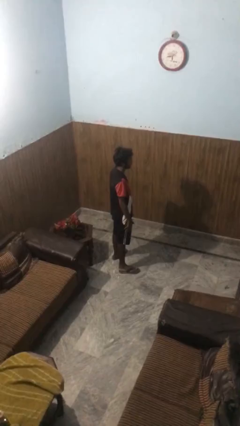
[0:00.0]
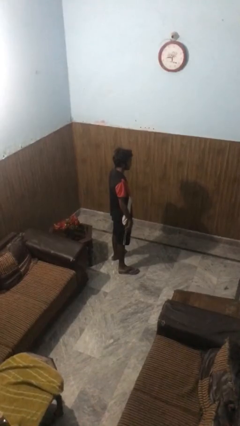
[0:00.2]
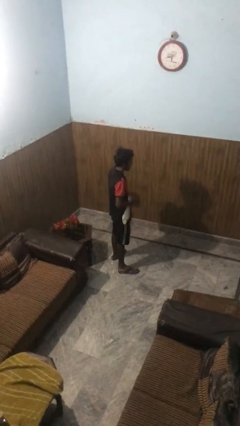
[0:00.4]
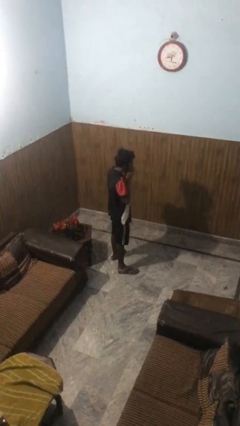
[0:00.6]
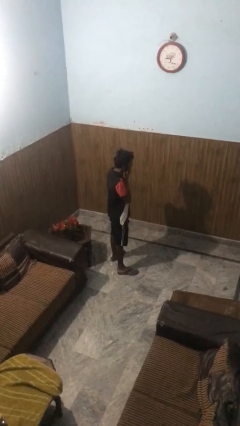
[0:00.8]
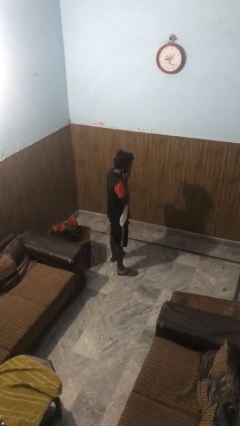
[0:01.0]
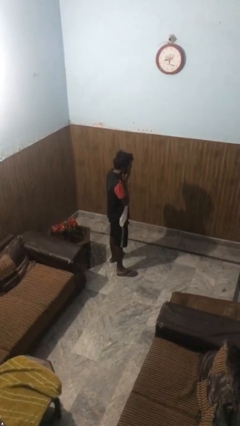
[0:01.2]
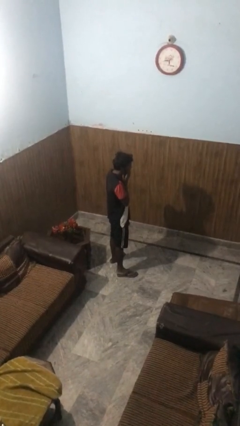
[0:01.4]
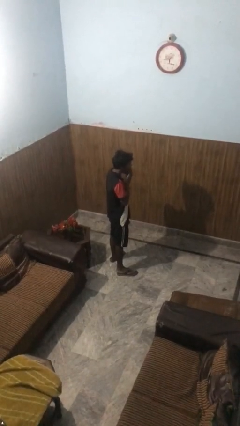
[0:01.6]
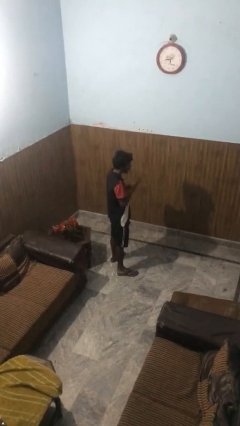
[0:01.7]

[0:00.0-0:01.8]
person covers face with hands

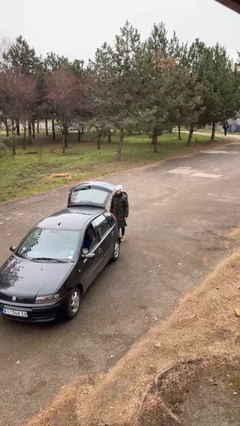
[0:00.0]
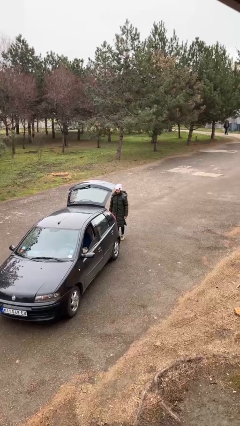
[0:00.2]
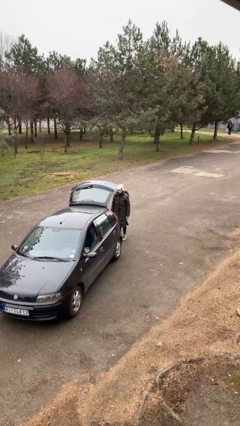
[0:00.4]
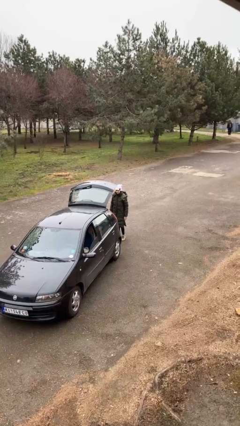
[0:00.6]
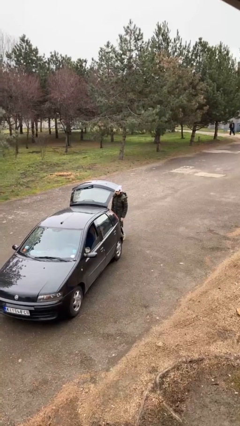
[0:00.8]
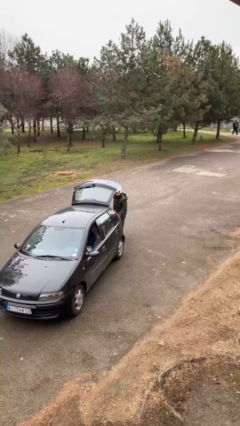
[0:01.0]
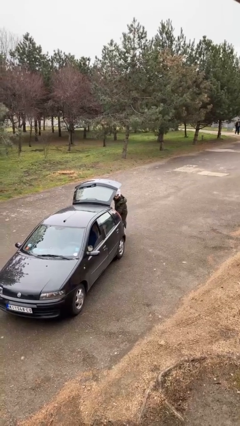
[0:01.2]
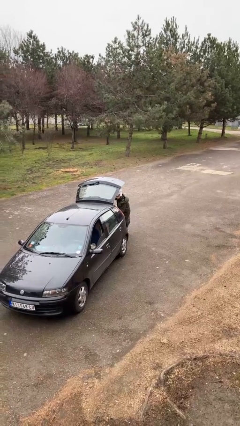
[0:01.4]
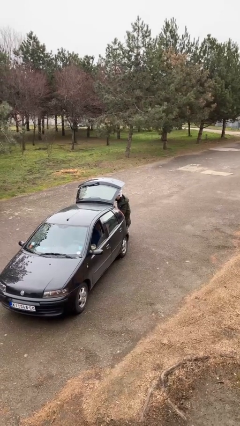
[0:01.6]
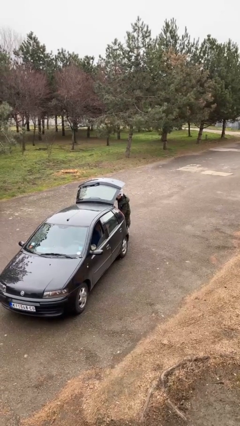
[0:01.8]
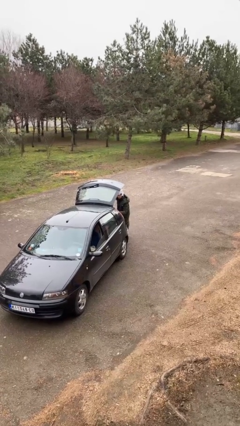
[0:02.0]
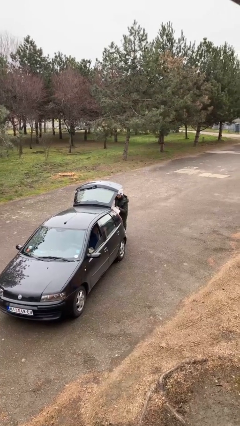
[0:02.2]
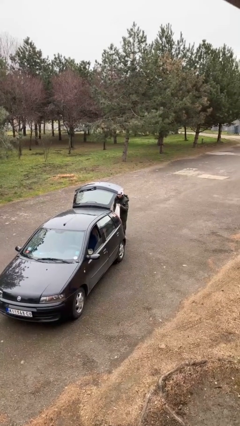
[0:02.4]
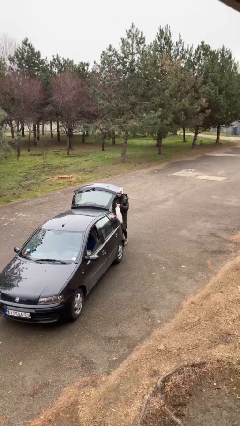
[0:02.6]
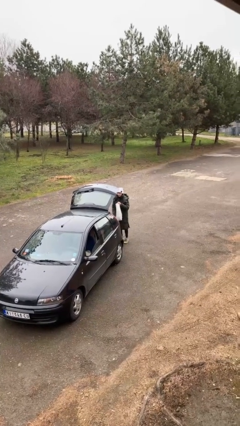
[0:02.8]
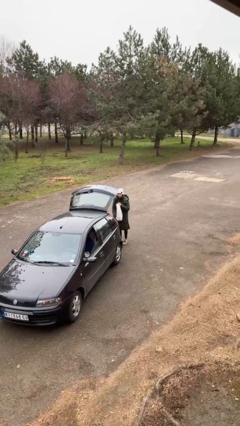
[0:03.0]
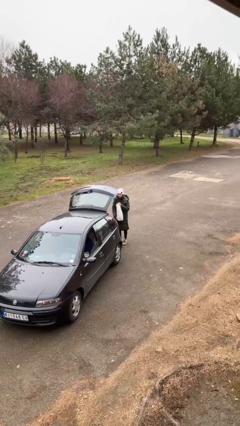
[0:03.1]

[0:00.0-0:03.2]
person unloads car

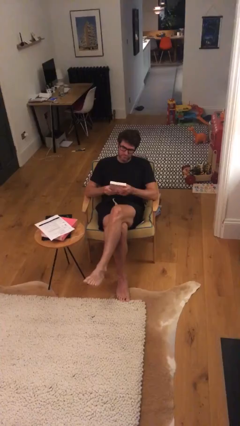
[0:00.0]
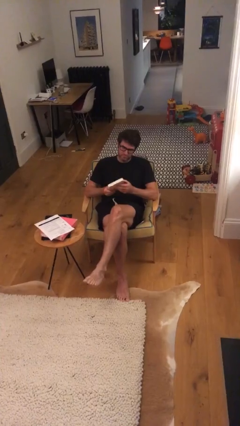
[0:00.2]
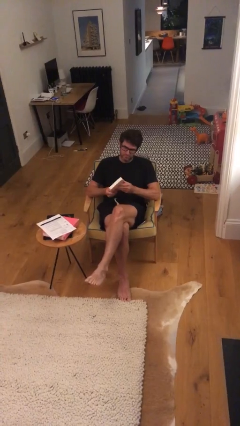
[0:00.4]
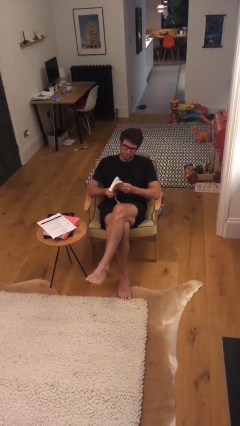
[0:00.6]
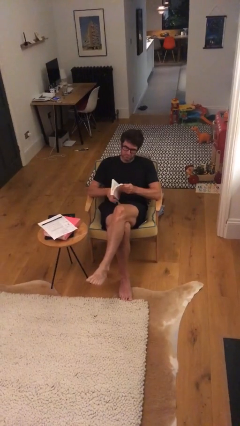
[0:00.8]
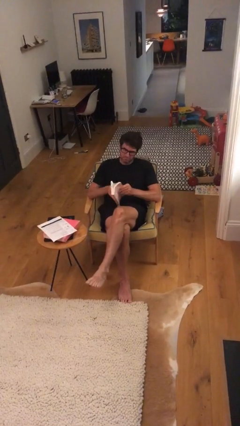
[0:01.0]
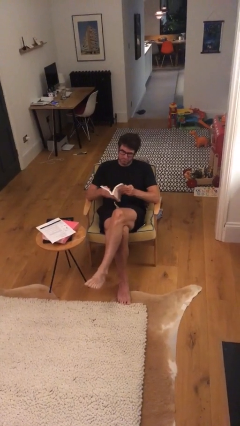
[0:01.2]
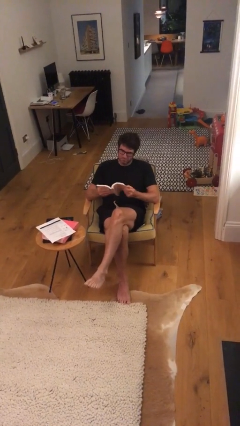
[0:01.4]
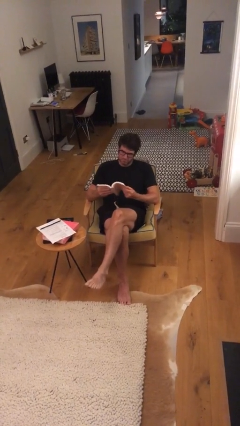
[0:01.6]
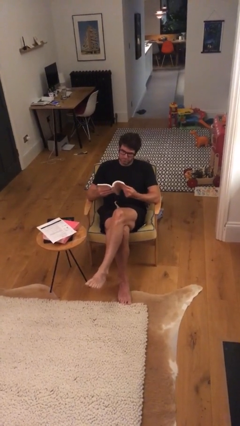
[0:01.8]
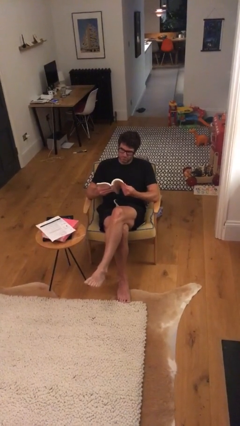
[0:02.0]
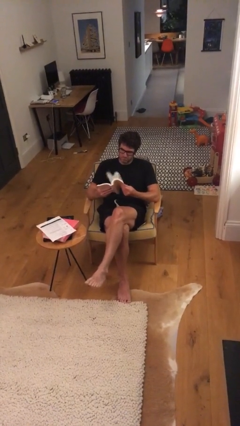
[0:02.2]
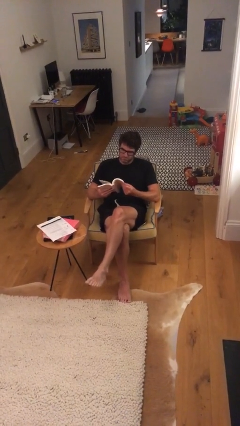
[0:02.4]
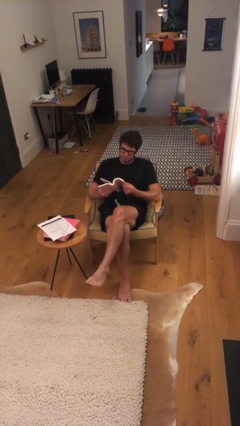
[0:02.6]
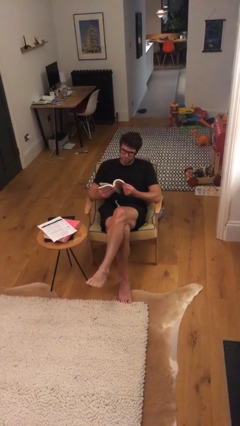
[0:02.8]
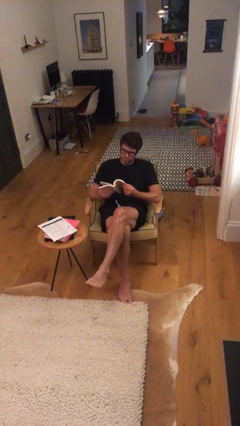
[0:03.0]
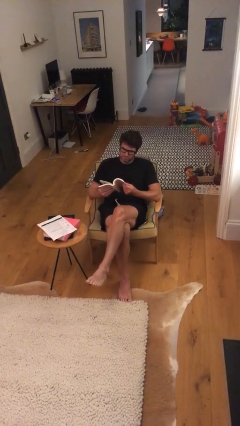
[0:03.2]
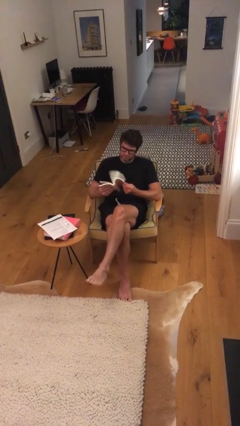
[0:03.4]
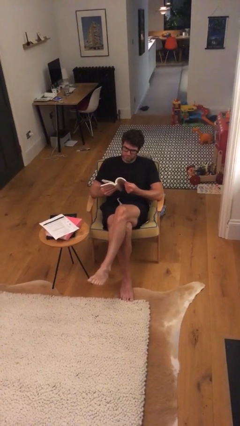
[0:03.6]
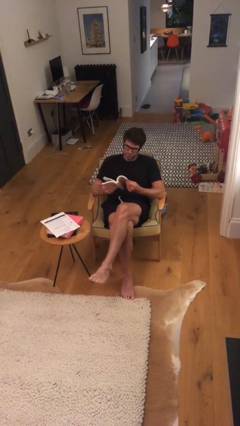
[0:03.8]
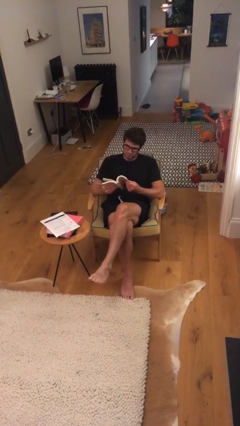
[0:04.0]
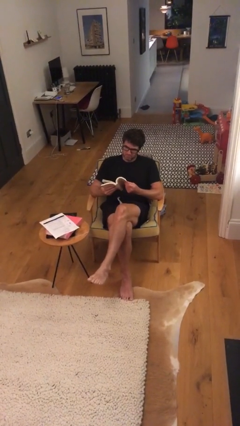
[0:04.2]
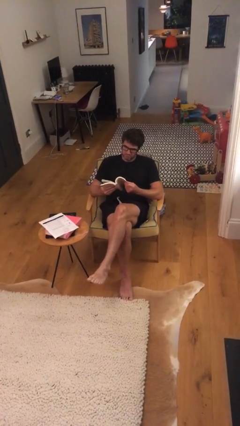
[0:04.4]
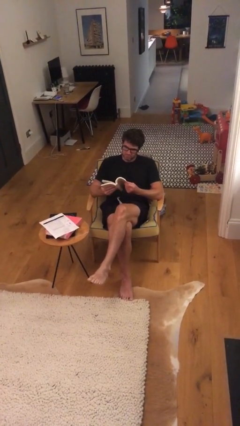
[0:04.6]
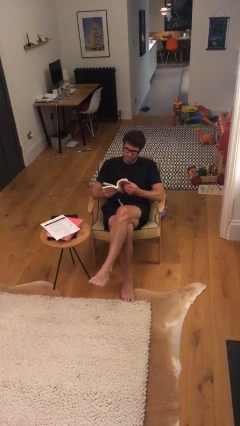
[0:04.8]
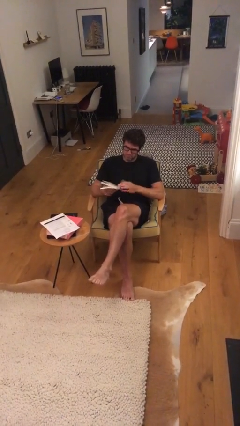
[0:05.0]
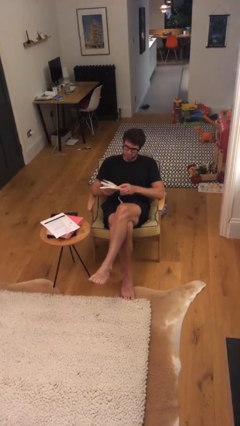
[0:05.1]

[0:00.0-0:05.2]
person reads document

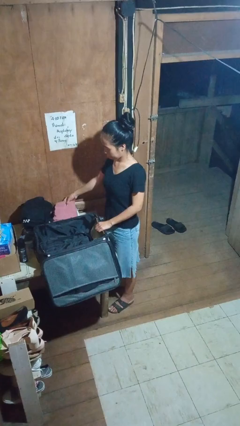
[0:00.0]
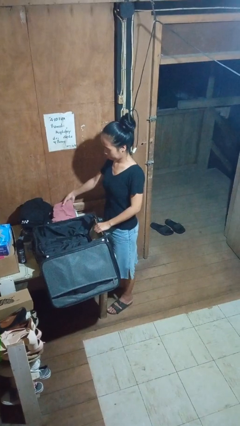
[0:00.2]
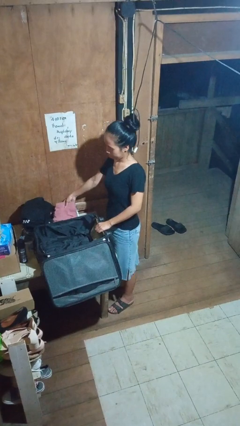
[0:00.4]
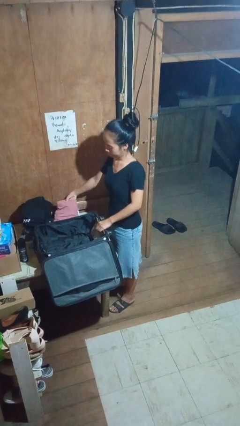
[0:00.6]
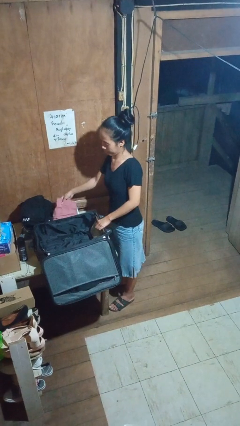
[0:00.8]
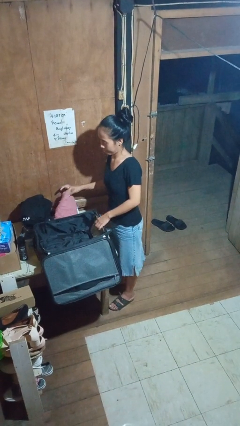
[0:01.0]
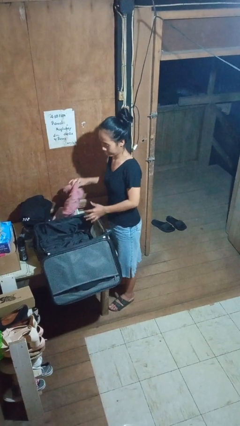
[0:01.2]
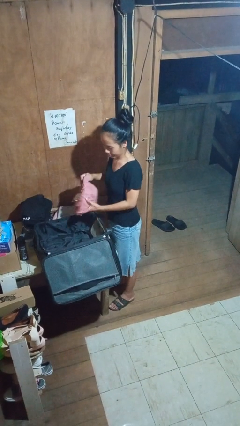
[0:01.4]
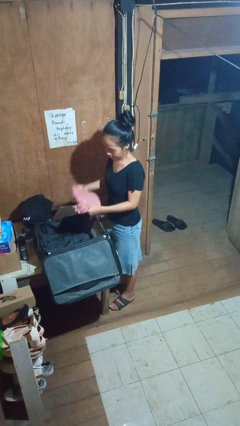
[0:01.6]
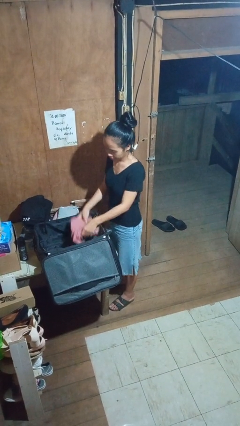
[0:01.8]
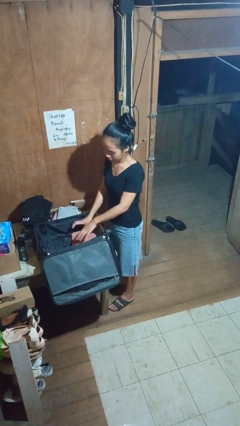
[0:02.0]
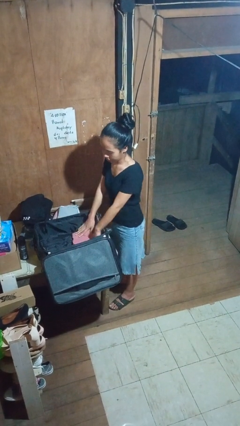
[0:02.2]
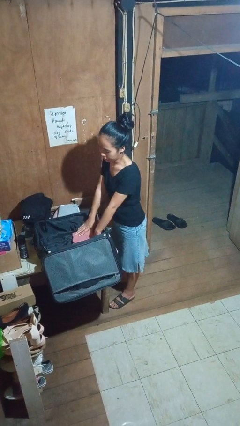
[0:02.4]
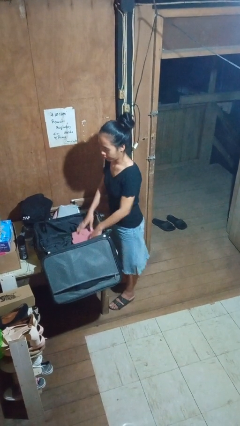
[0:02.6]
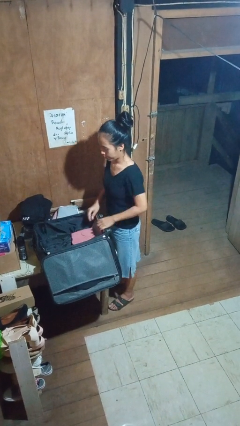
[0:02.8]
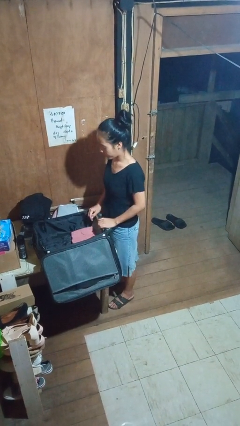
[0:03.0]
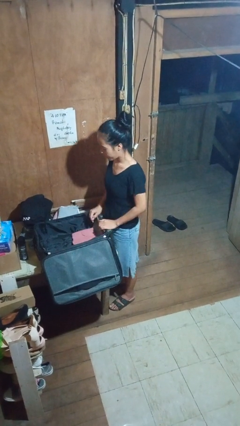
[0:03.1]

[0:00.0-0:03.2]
person loads clothes into suitcase

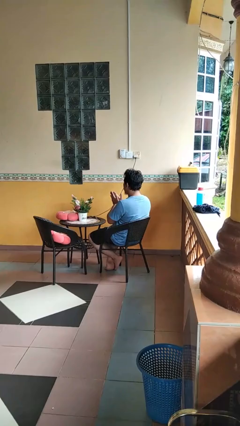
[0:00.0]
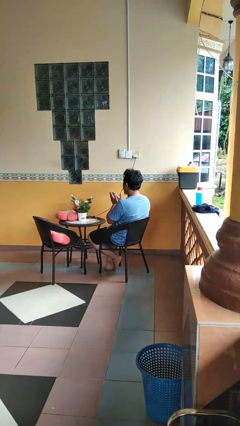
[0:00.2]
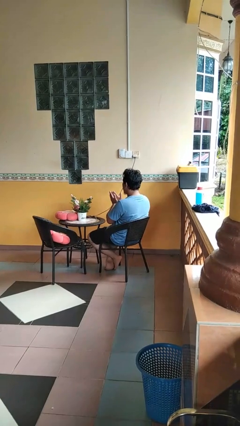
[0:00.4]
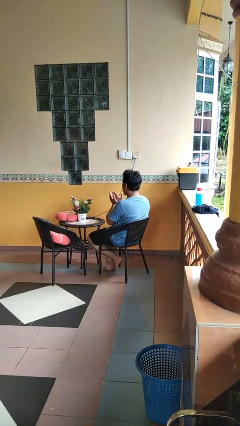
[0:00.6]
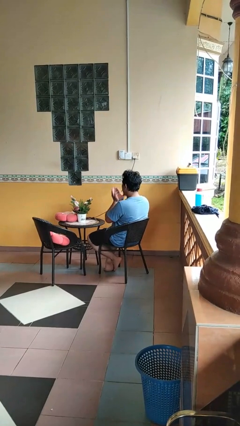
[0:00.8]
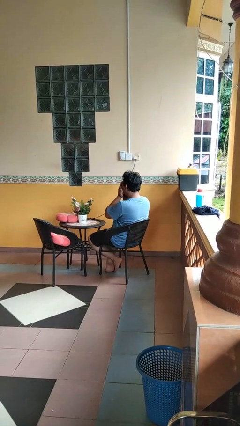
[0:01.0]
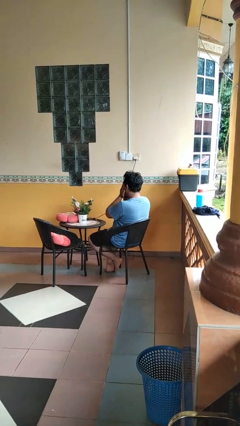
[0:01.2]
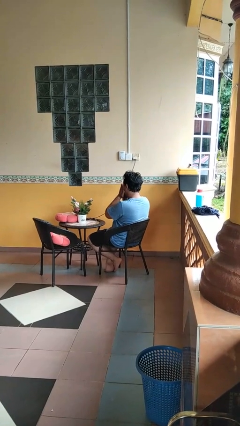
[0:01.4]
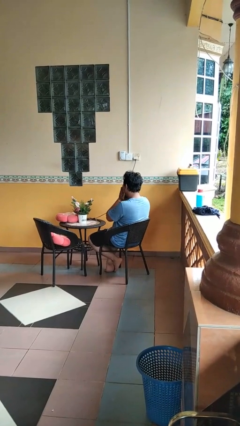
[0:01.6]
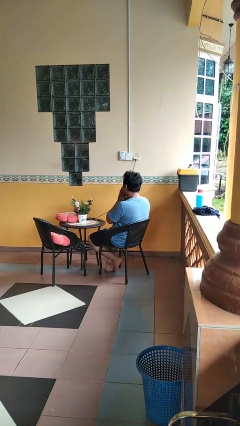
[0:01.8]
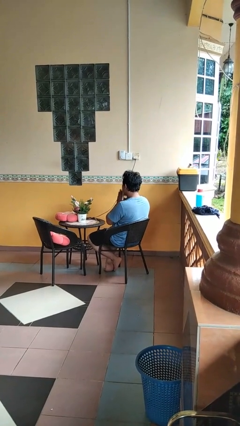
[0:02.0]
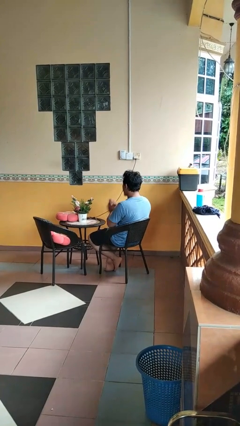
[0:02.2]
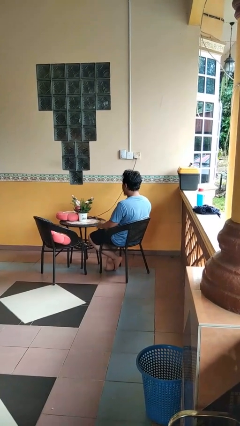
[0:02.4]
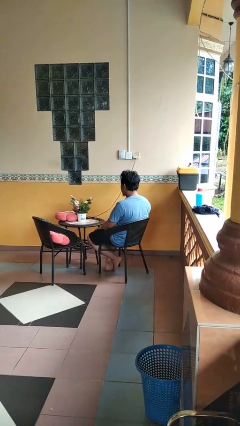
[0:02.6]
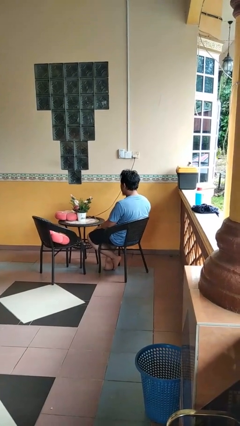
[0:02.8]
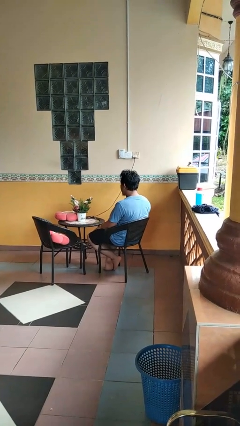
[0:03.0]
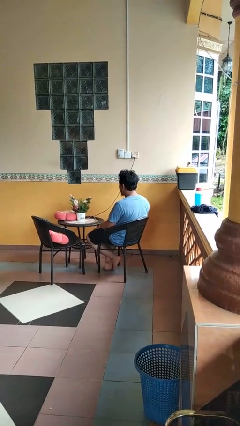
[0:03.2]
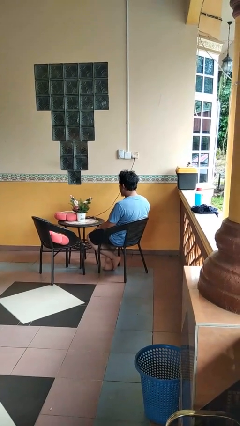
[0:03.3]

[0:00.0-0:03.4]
person prays

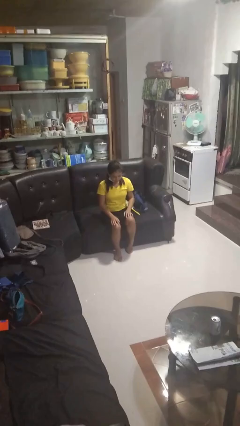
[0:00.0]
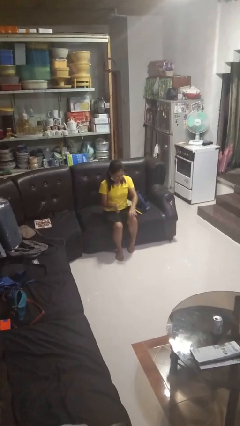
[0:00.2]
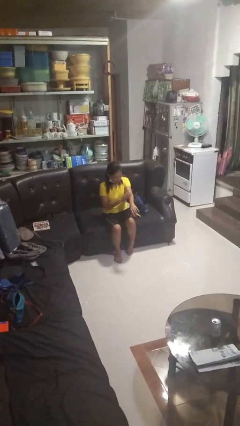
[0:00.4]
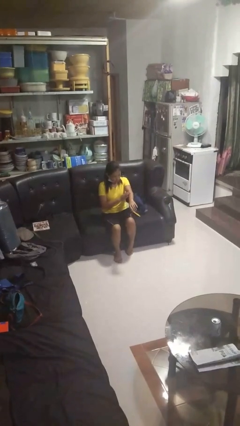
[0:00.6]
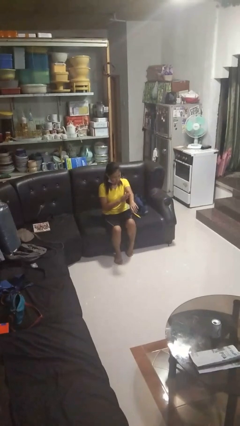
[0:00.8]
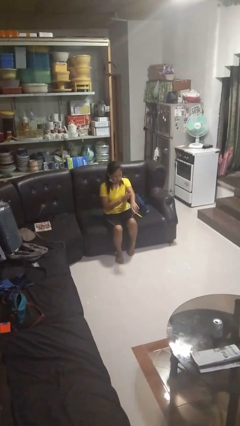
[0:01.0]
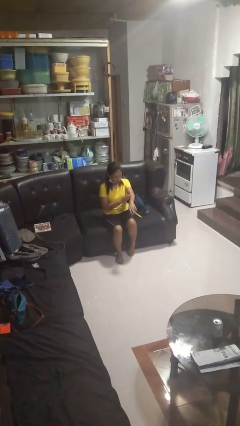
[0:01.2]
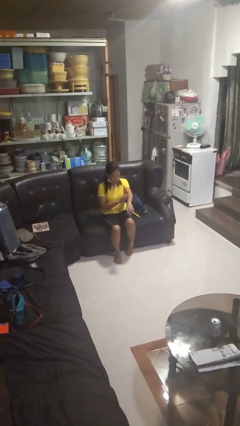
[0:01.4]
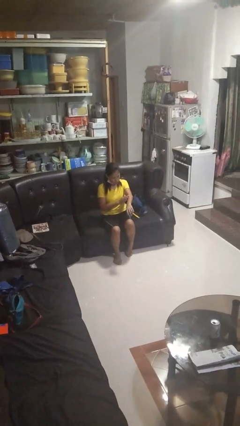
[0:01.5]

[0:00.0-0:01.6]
person swats bug
